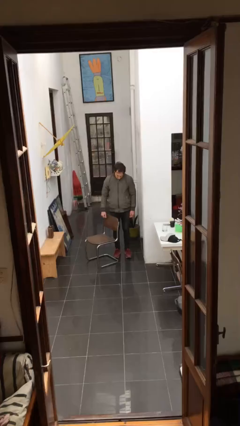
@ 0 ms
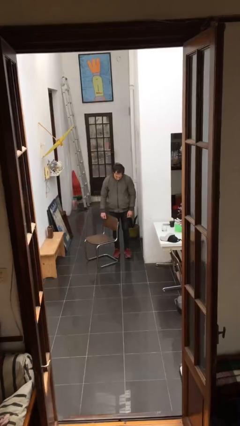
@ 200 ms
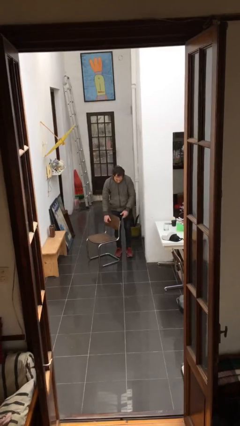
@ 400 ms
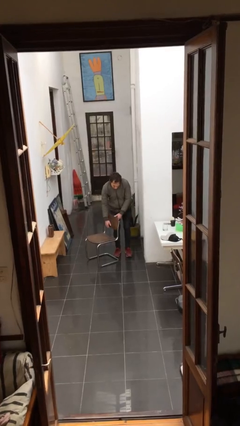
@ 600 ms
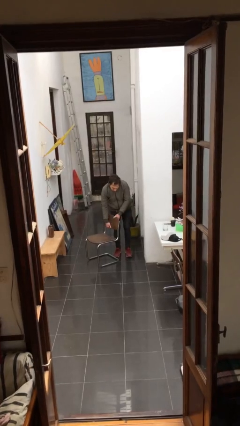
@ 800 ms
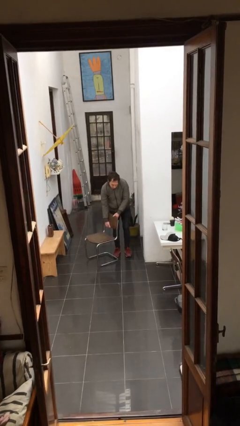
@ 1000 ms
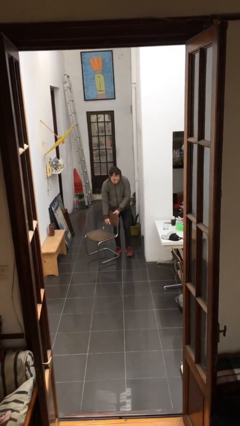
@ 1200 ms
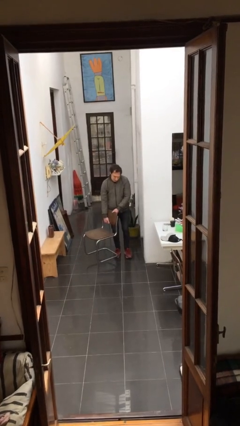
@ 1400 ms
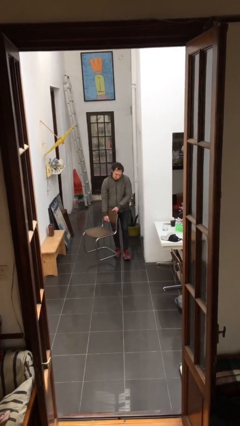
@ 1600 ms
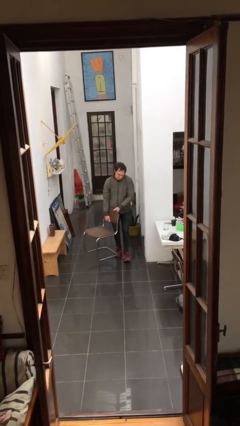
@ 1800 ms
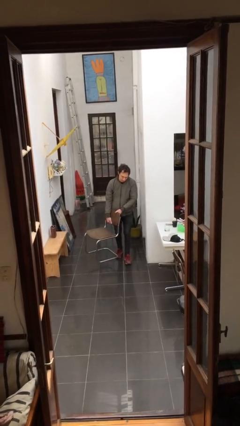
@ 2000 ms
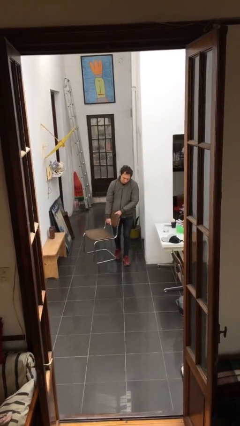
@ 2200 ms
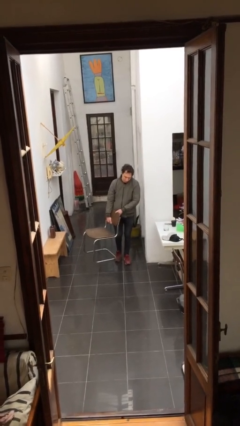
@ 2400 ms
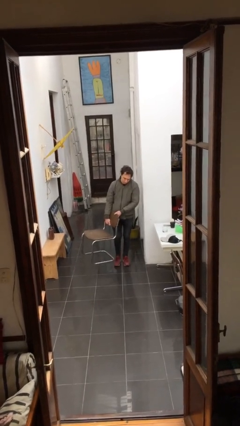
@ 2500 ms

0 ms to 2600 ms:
person picks up object from floor

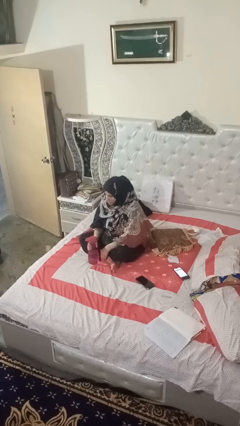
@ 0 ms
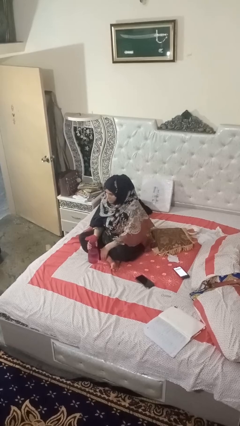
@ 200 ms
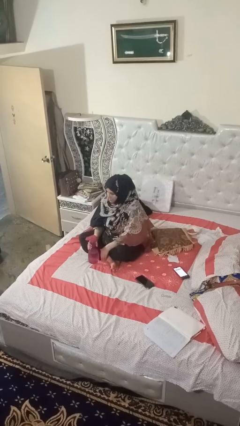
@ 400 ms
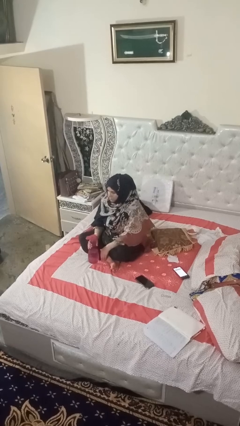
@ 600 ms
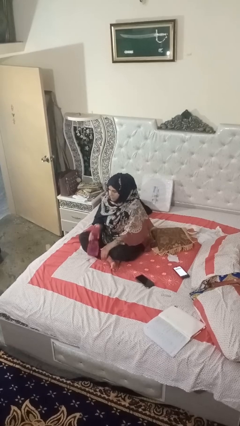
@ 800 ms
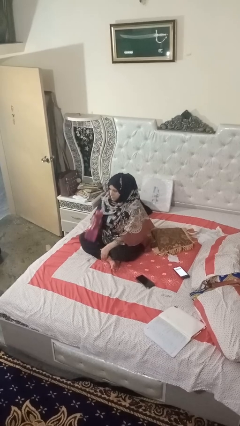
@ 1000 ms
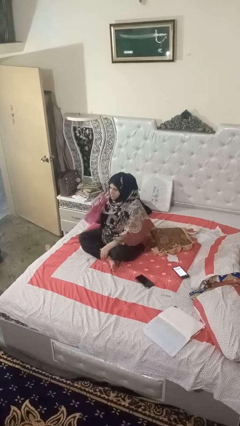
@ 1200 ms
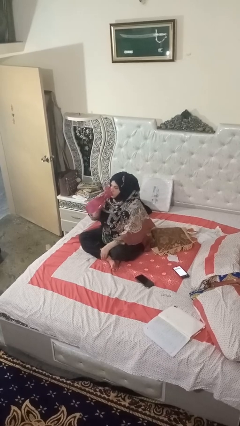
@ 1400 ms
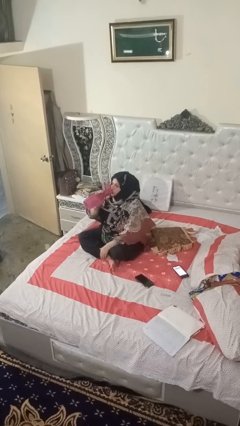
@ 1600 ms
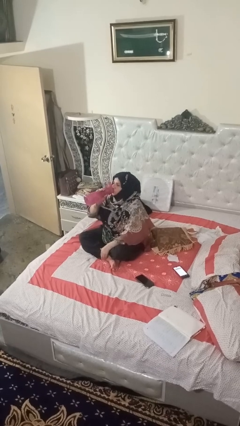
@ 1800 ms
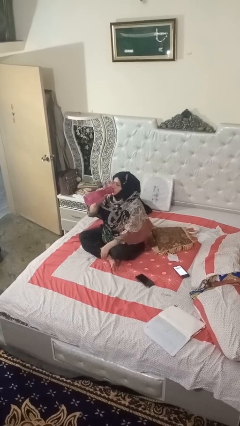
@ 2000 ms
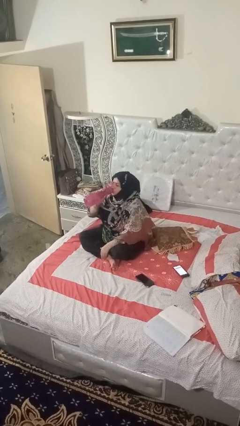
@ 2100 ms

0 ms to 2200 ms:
person drinks from bottle

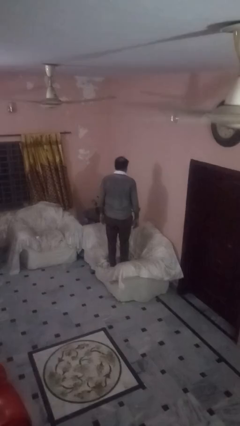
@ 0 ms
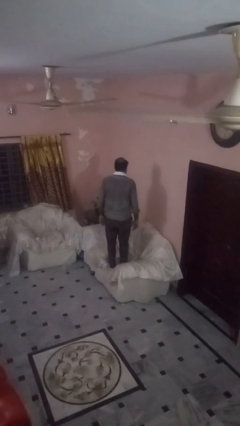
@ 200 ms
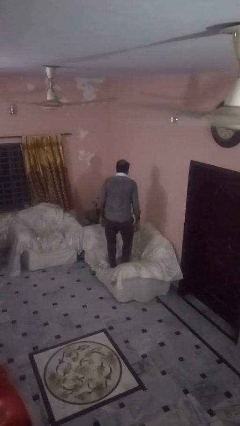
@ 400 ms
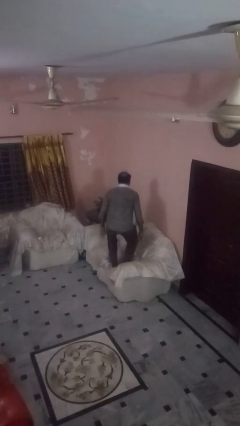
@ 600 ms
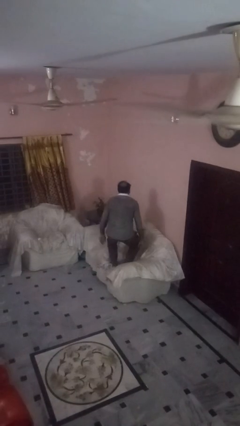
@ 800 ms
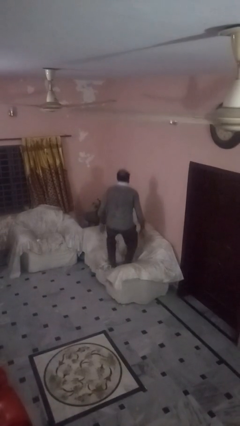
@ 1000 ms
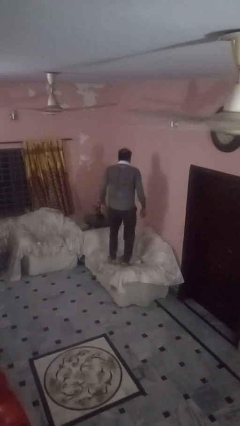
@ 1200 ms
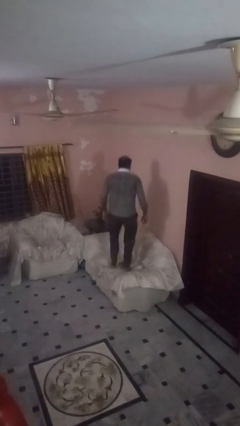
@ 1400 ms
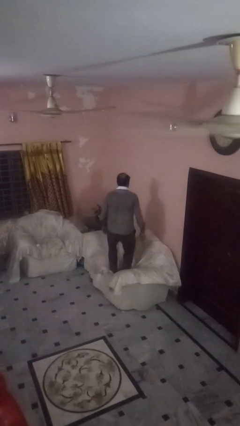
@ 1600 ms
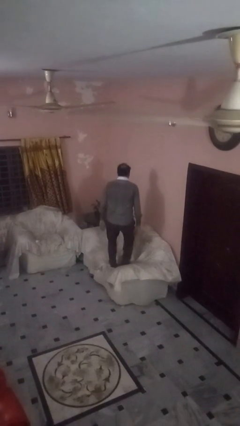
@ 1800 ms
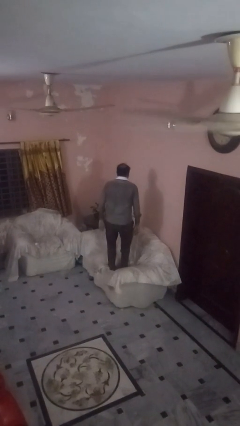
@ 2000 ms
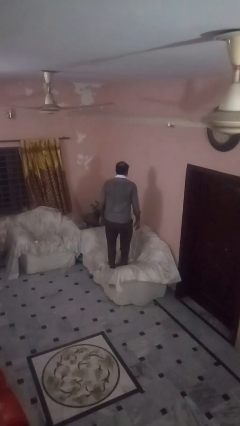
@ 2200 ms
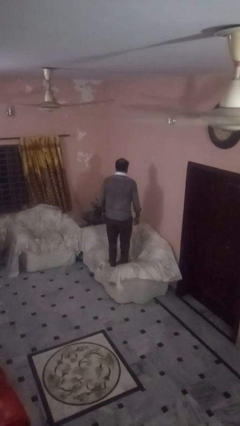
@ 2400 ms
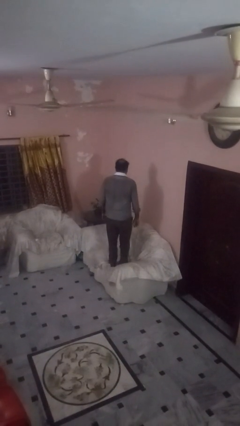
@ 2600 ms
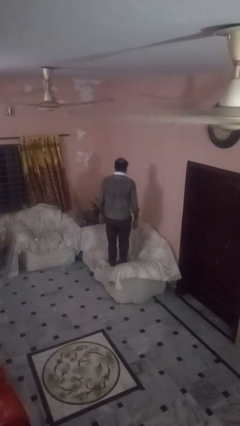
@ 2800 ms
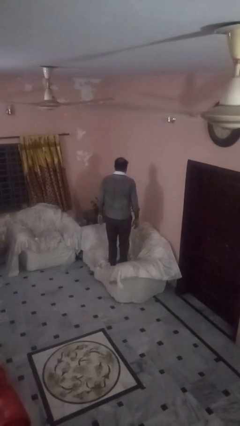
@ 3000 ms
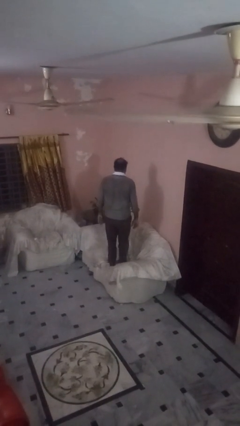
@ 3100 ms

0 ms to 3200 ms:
person jumps on couch

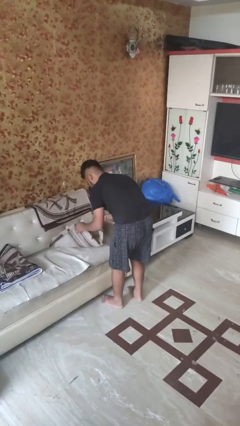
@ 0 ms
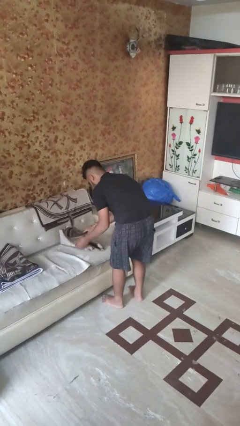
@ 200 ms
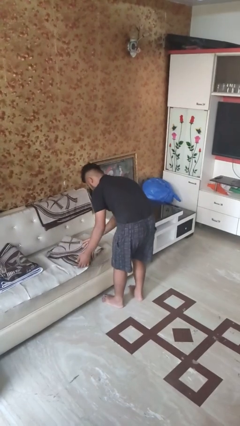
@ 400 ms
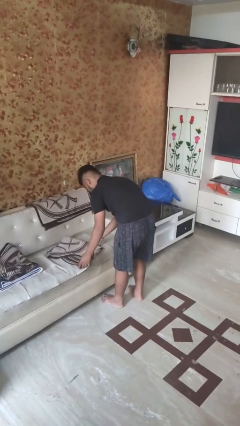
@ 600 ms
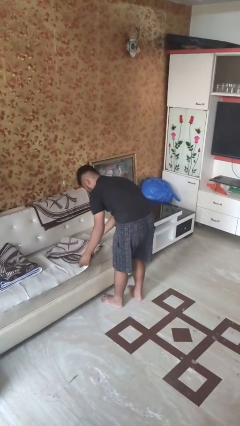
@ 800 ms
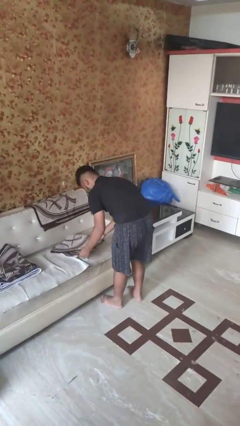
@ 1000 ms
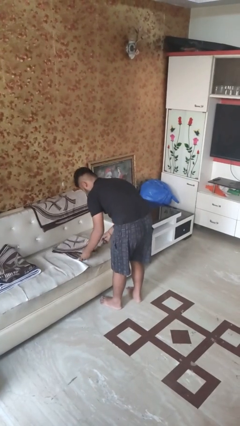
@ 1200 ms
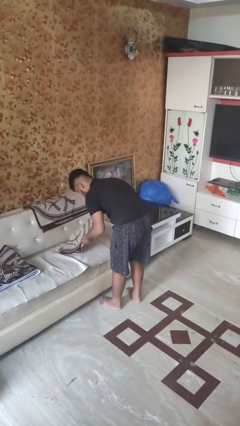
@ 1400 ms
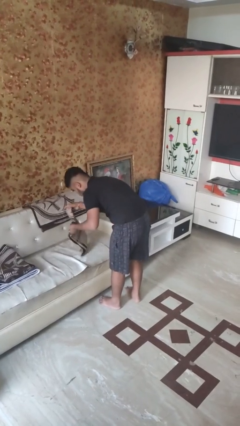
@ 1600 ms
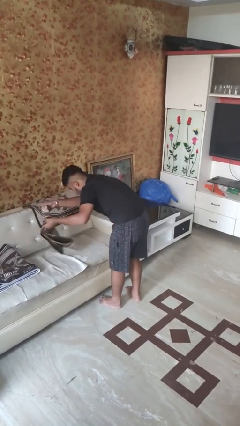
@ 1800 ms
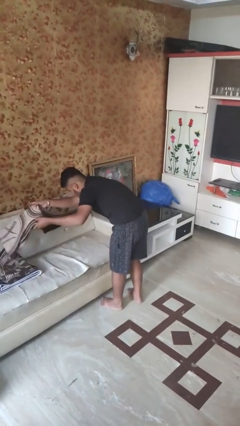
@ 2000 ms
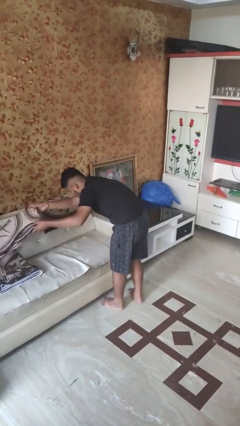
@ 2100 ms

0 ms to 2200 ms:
person folds towel

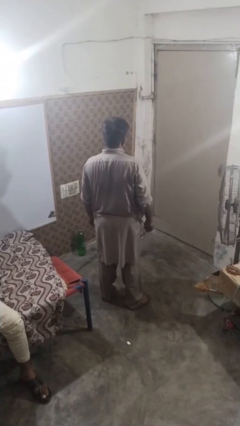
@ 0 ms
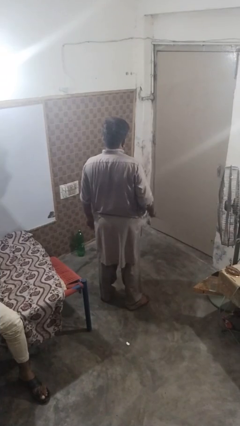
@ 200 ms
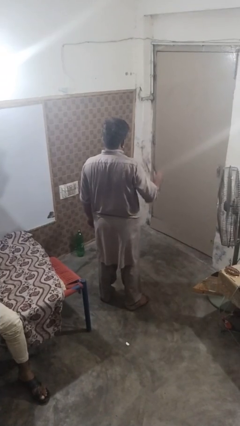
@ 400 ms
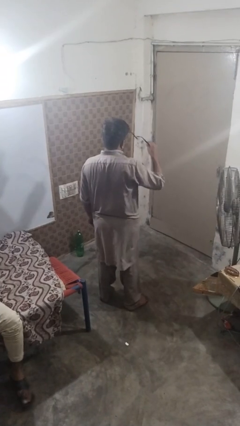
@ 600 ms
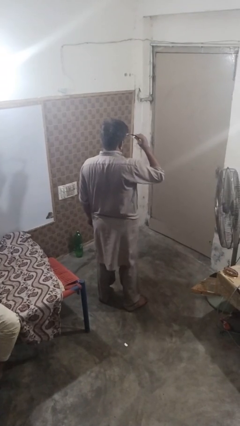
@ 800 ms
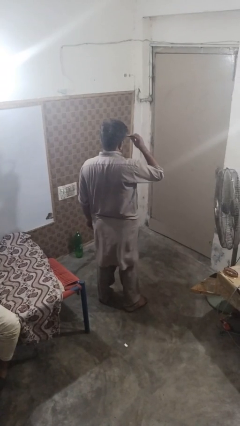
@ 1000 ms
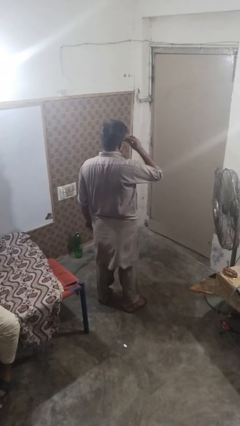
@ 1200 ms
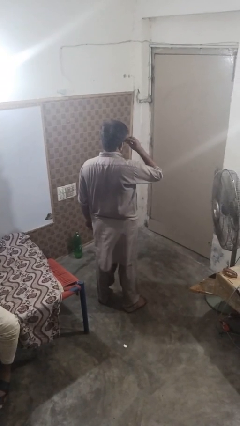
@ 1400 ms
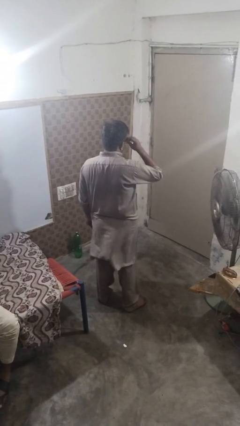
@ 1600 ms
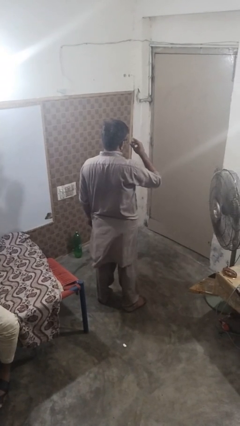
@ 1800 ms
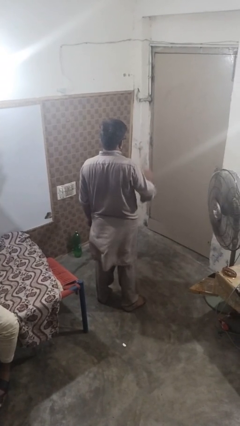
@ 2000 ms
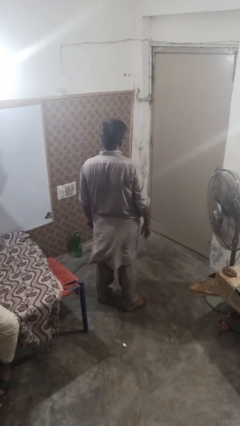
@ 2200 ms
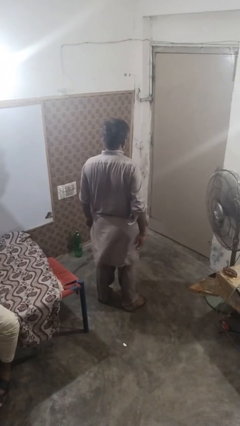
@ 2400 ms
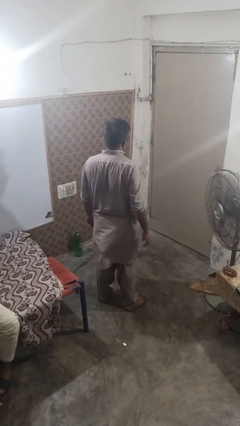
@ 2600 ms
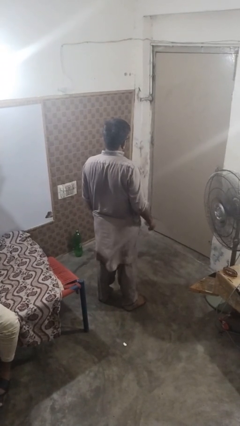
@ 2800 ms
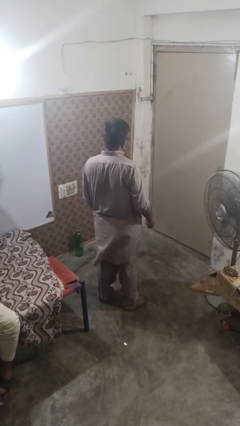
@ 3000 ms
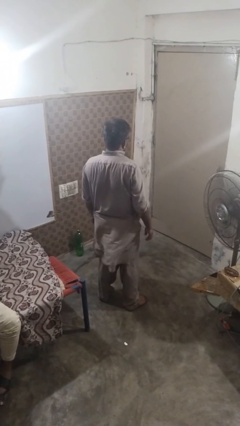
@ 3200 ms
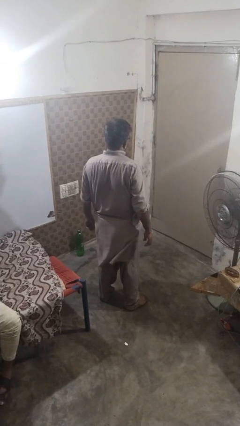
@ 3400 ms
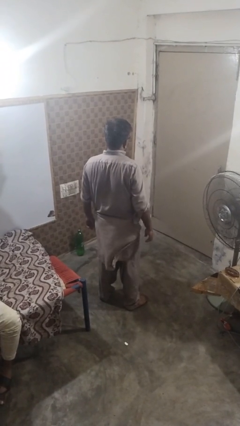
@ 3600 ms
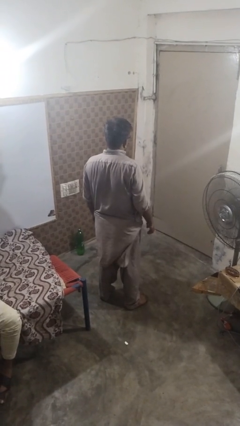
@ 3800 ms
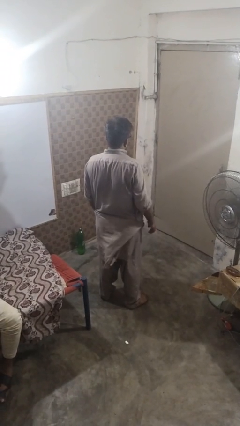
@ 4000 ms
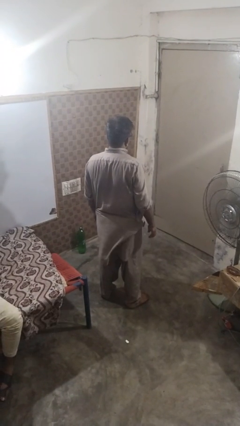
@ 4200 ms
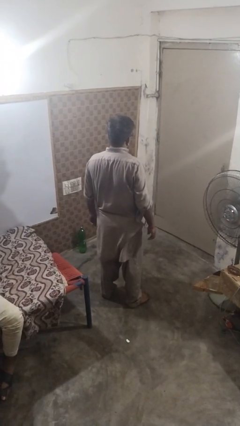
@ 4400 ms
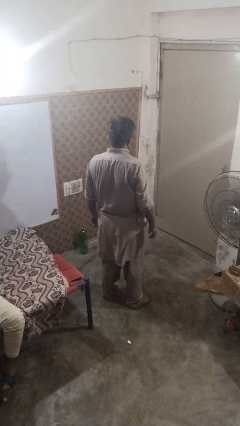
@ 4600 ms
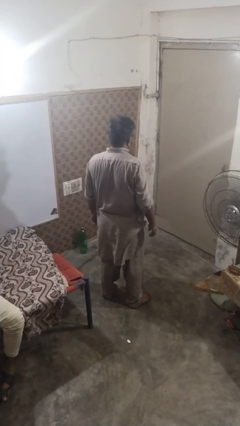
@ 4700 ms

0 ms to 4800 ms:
person puts on glasses

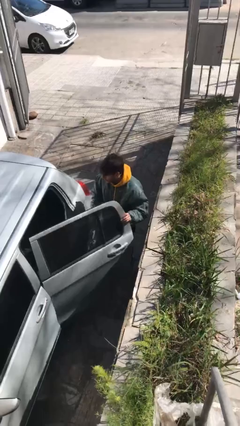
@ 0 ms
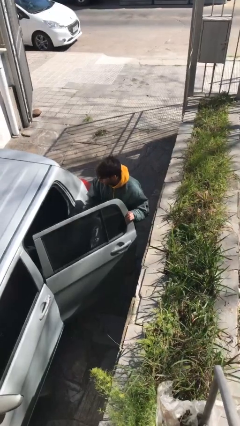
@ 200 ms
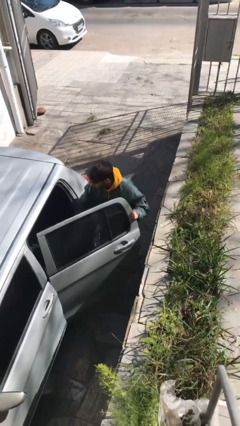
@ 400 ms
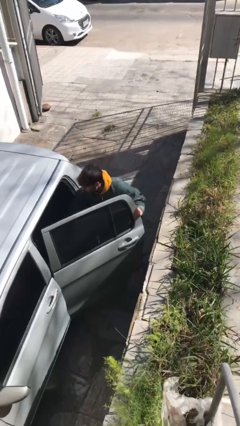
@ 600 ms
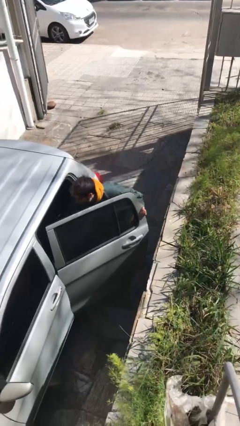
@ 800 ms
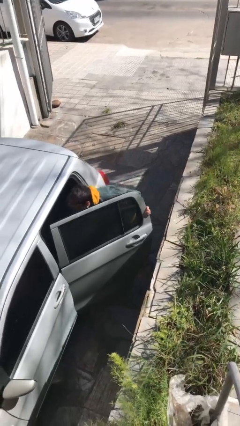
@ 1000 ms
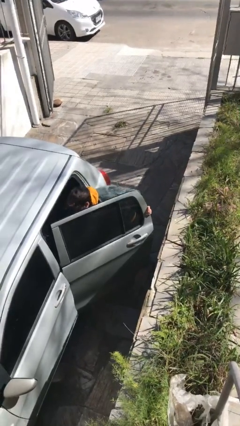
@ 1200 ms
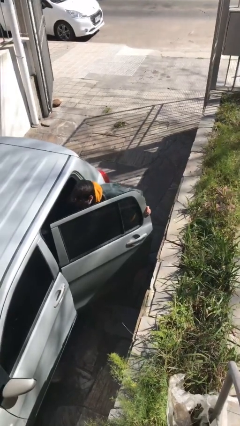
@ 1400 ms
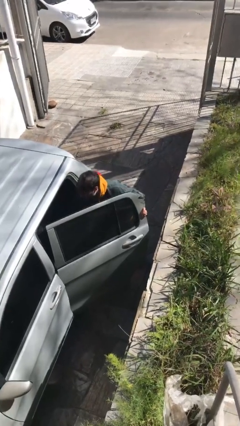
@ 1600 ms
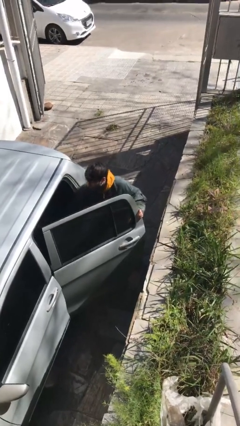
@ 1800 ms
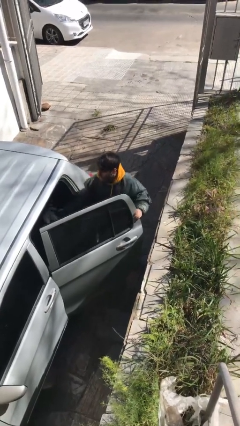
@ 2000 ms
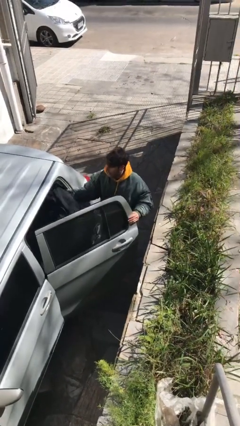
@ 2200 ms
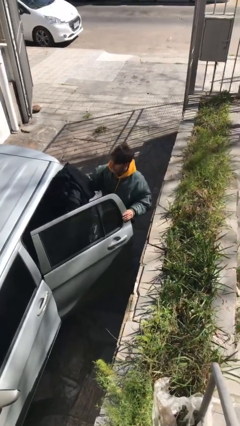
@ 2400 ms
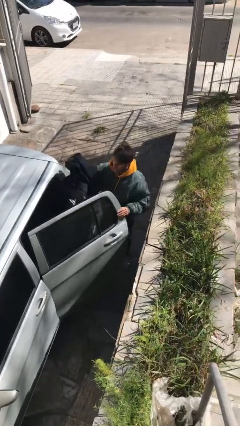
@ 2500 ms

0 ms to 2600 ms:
person unloads car
